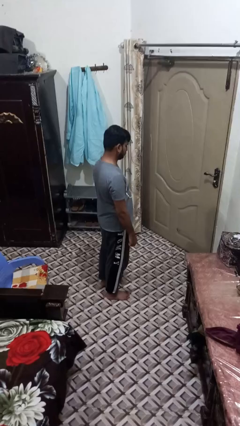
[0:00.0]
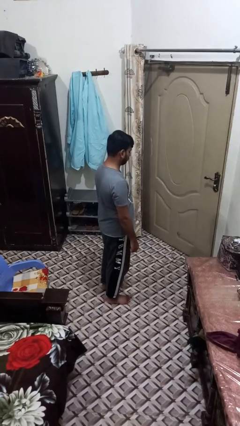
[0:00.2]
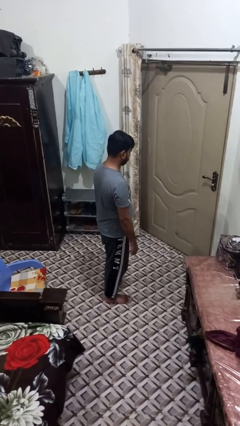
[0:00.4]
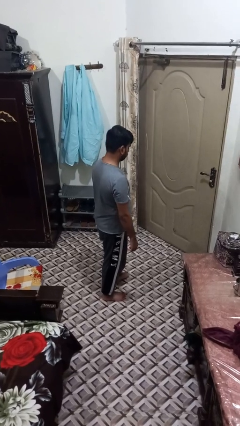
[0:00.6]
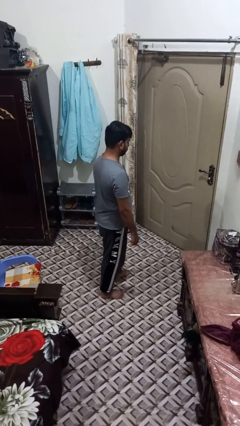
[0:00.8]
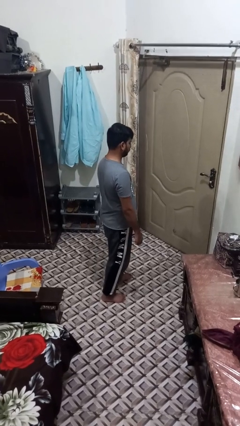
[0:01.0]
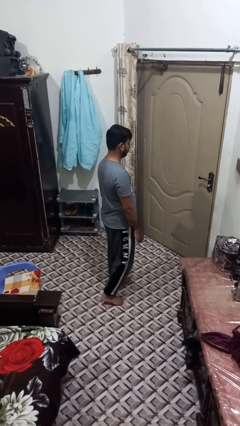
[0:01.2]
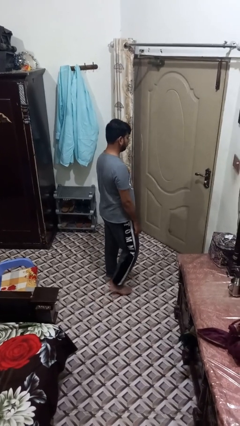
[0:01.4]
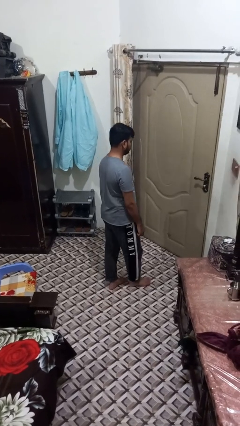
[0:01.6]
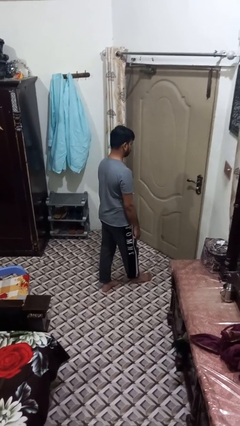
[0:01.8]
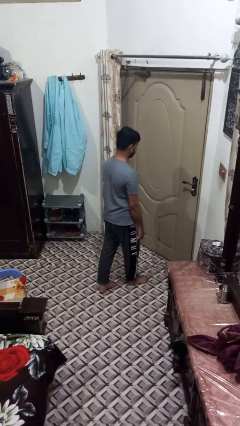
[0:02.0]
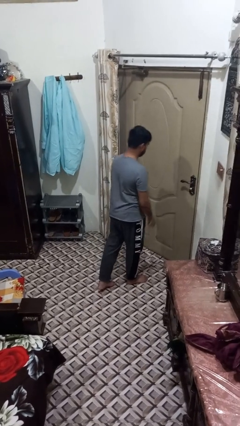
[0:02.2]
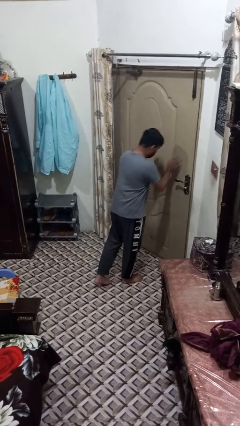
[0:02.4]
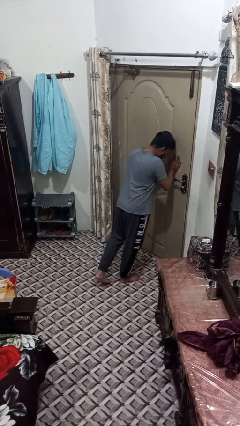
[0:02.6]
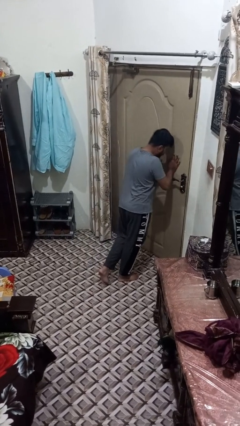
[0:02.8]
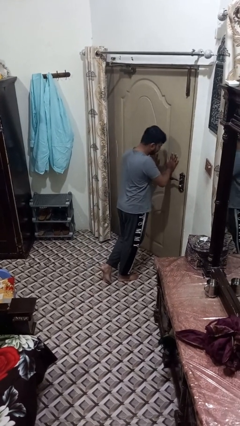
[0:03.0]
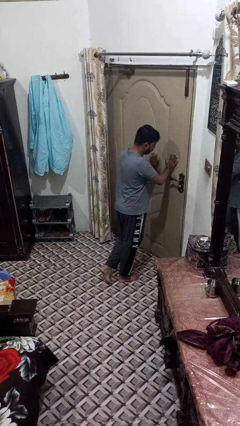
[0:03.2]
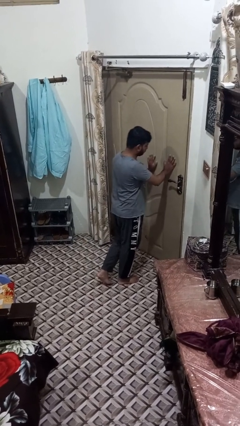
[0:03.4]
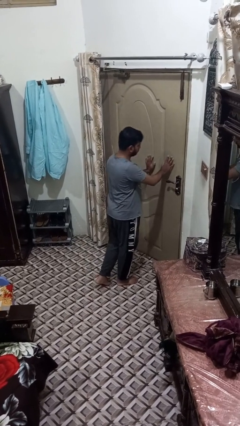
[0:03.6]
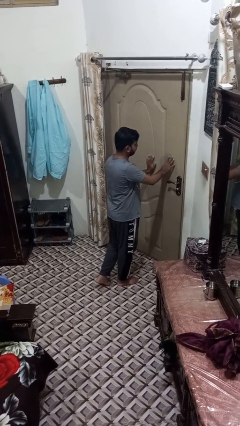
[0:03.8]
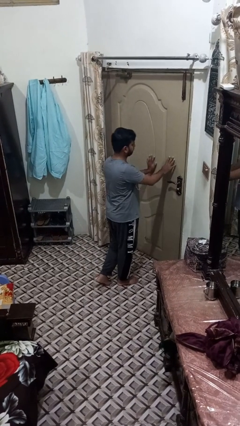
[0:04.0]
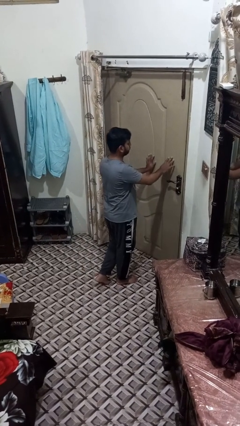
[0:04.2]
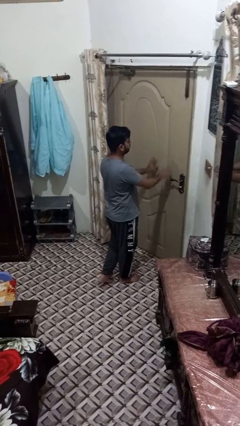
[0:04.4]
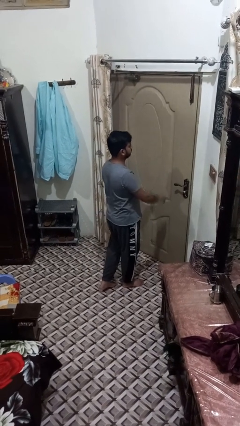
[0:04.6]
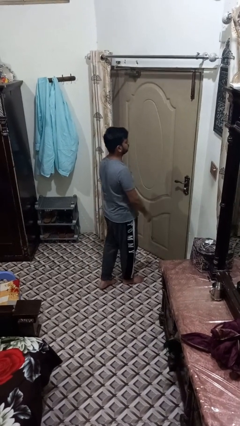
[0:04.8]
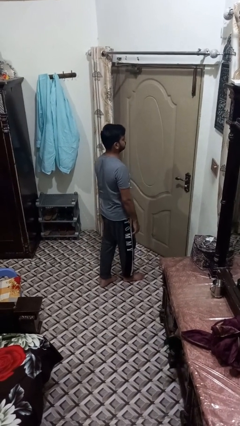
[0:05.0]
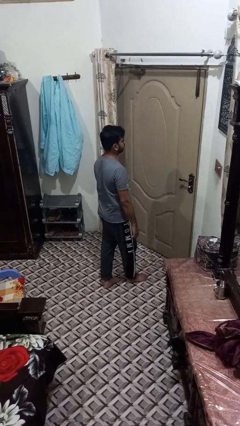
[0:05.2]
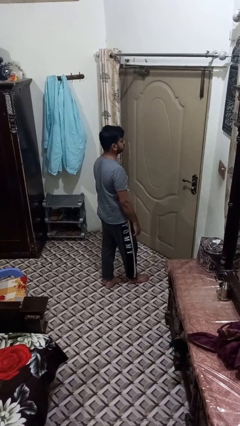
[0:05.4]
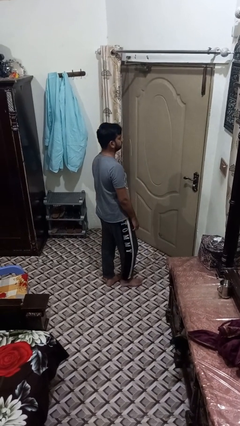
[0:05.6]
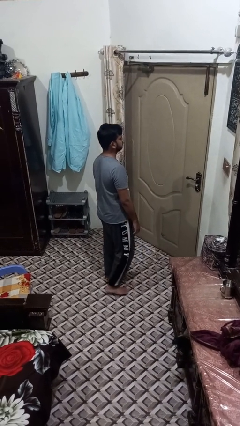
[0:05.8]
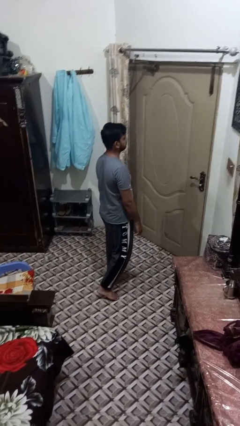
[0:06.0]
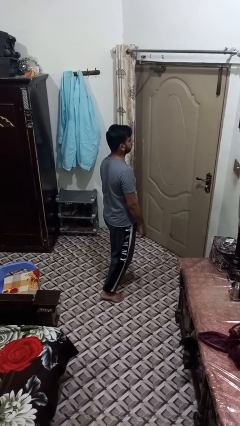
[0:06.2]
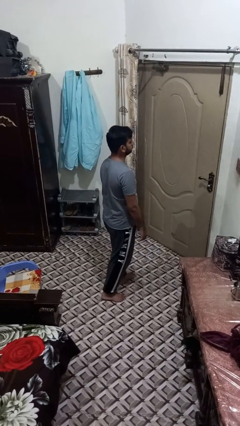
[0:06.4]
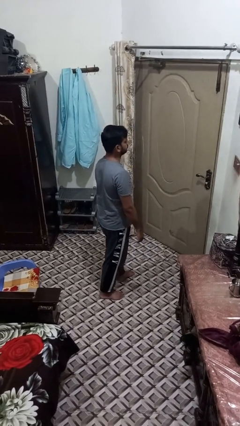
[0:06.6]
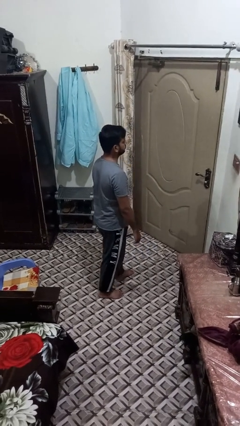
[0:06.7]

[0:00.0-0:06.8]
person bumps into wall

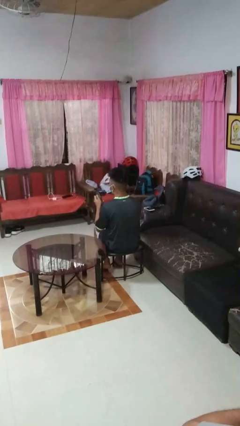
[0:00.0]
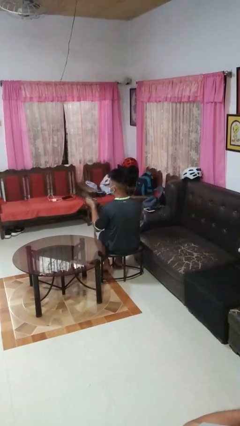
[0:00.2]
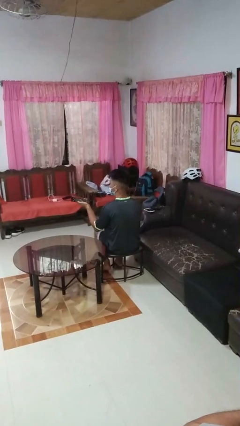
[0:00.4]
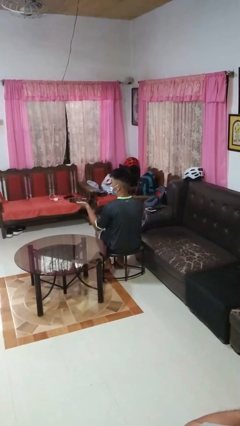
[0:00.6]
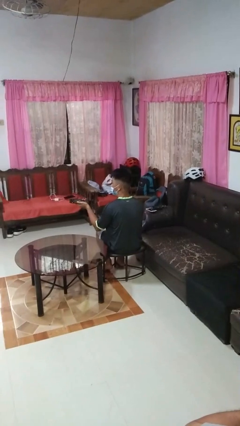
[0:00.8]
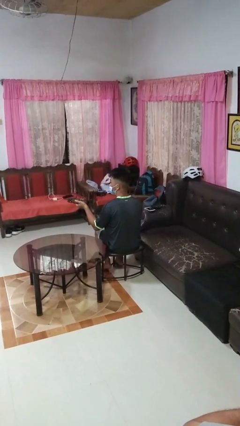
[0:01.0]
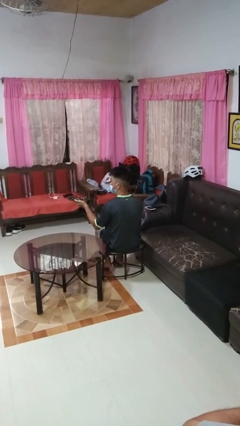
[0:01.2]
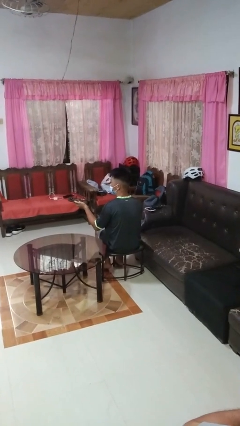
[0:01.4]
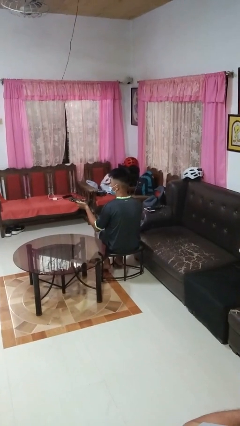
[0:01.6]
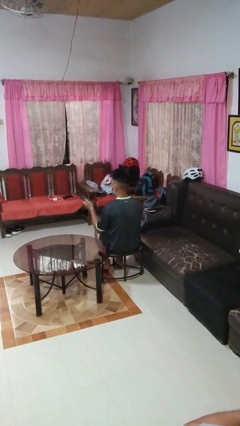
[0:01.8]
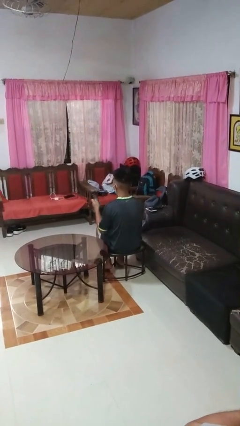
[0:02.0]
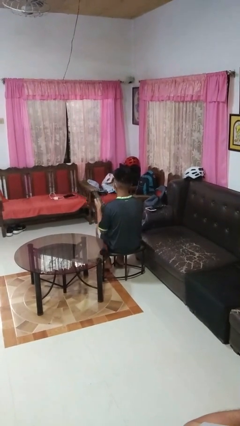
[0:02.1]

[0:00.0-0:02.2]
person uses television remote

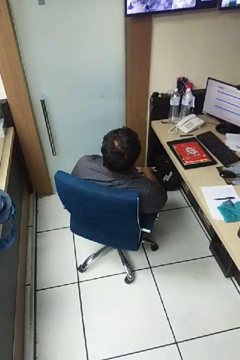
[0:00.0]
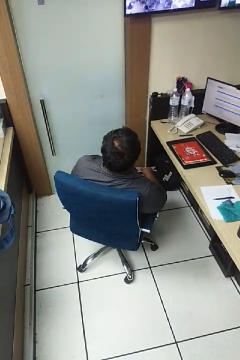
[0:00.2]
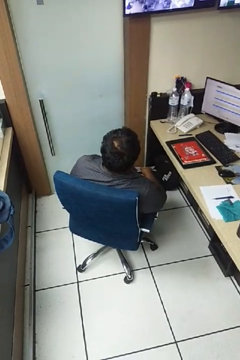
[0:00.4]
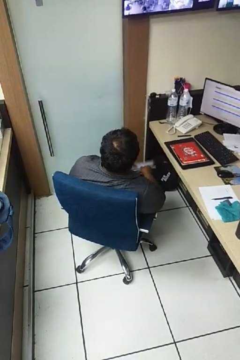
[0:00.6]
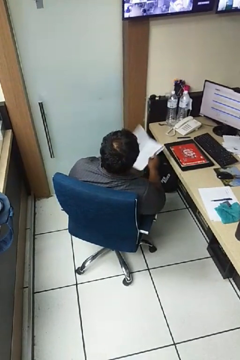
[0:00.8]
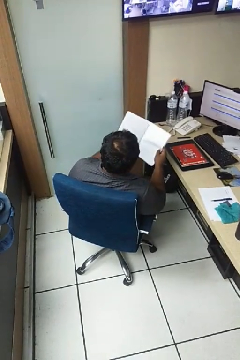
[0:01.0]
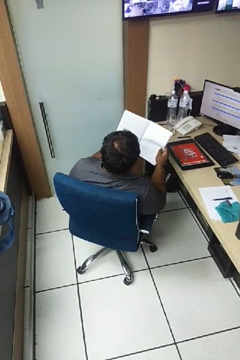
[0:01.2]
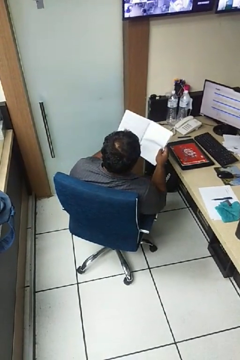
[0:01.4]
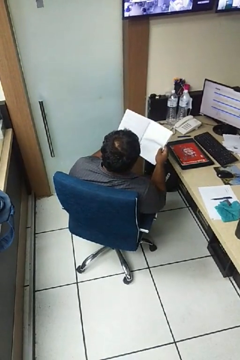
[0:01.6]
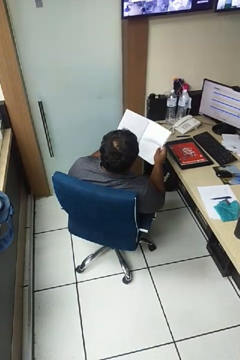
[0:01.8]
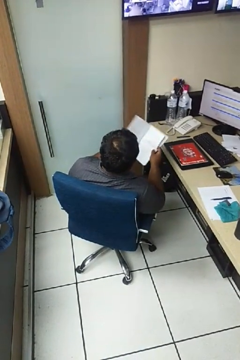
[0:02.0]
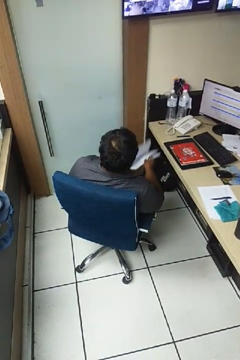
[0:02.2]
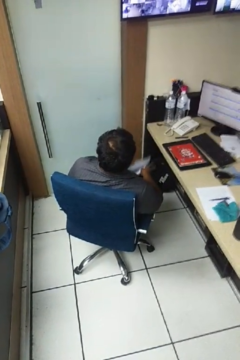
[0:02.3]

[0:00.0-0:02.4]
person reads book

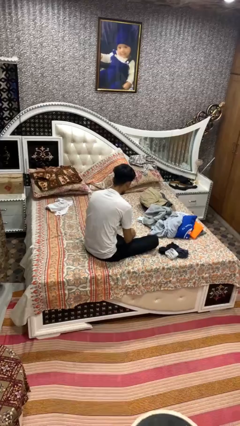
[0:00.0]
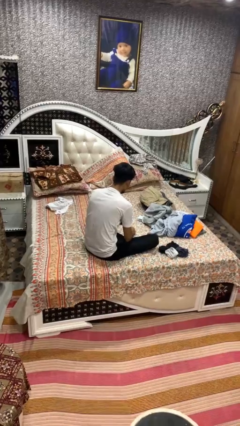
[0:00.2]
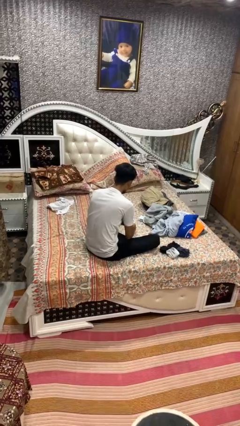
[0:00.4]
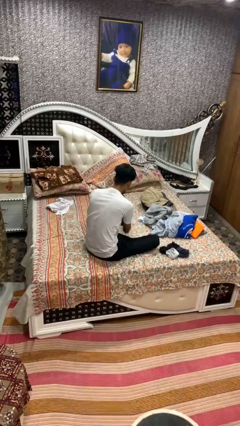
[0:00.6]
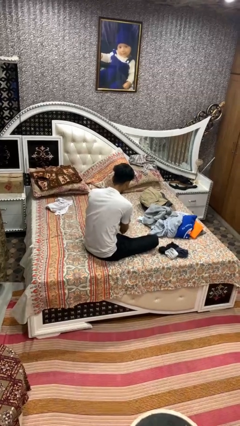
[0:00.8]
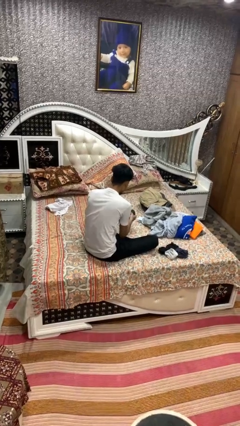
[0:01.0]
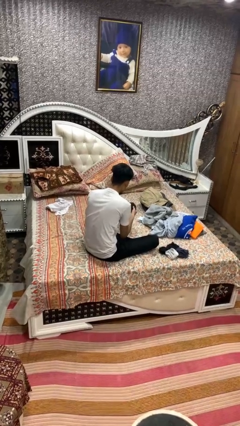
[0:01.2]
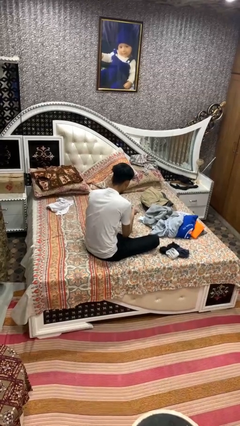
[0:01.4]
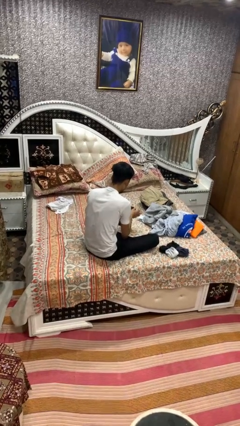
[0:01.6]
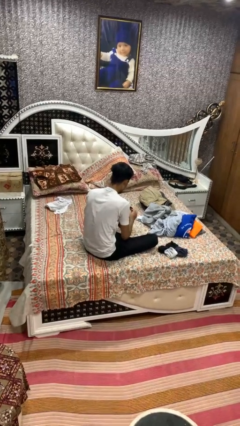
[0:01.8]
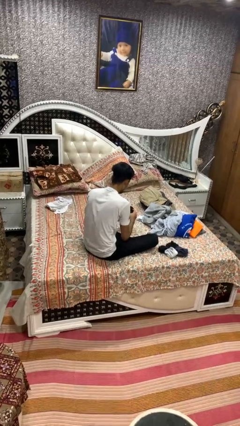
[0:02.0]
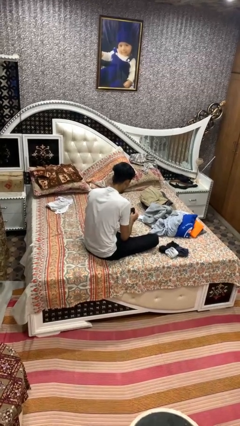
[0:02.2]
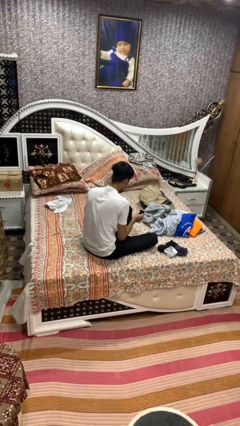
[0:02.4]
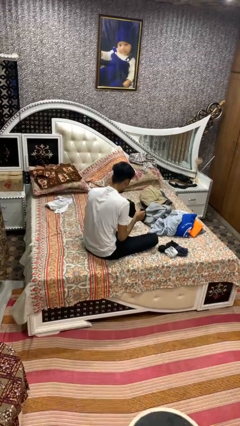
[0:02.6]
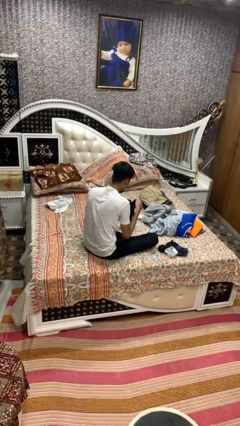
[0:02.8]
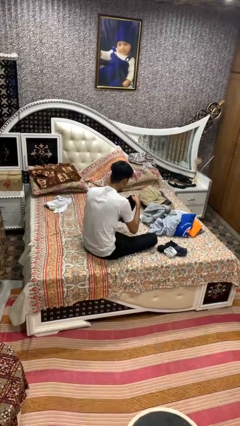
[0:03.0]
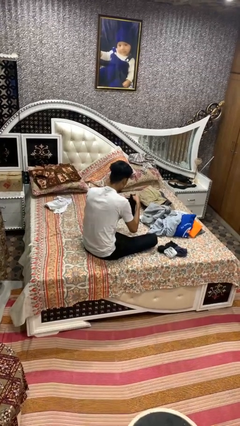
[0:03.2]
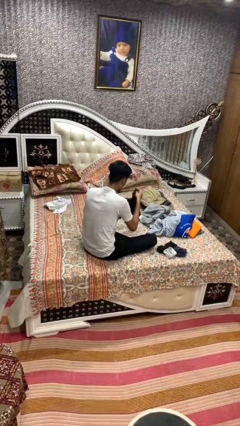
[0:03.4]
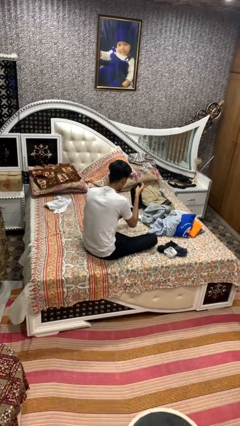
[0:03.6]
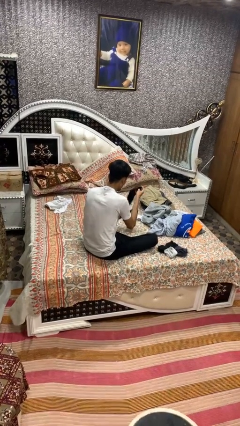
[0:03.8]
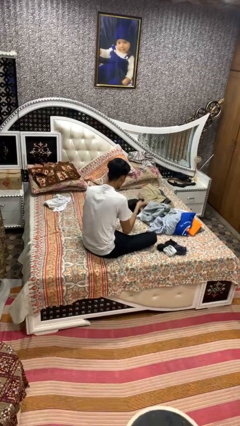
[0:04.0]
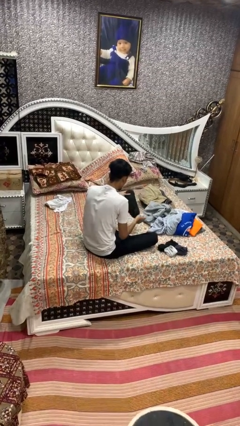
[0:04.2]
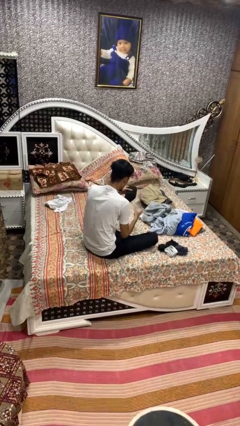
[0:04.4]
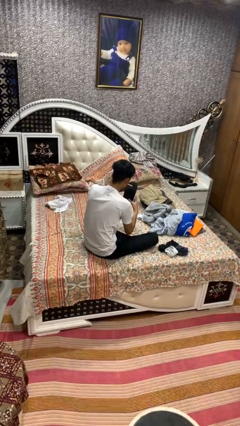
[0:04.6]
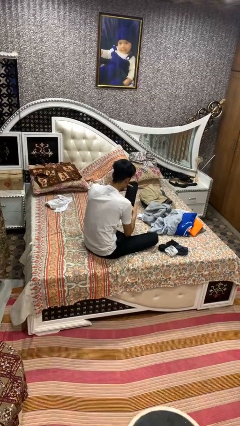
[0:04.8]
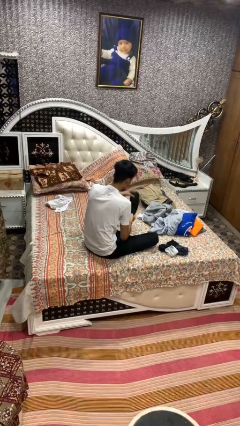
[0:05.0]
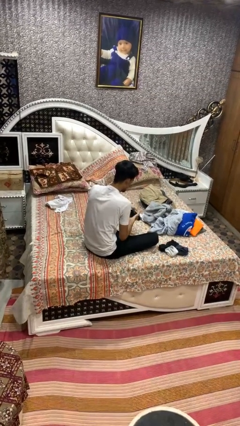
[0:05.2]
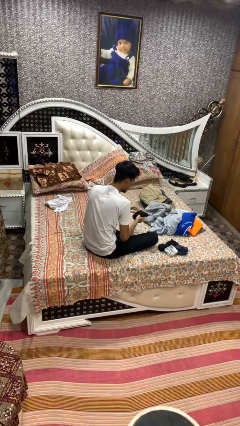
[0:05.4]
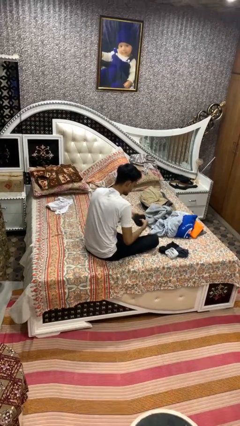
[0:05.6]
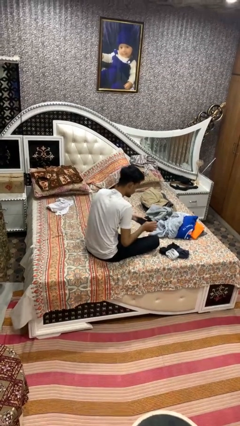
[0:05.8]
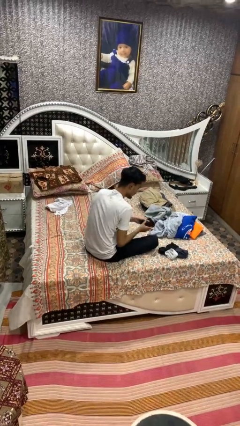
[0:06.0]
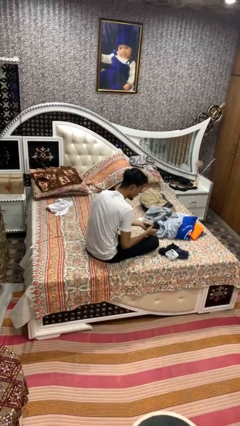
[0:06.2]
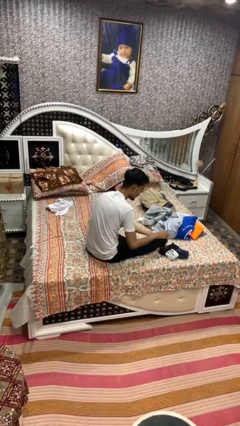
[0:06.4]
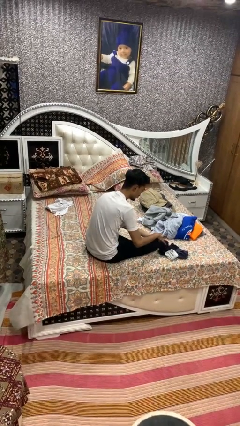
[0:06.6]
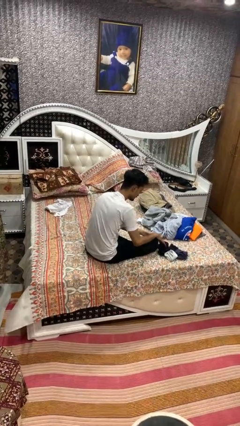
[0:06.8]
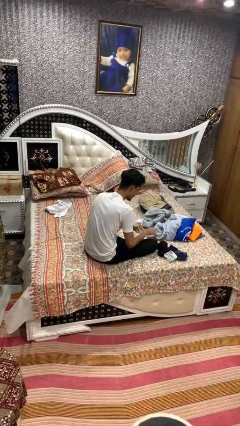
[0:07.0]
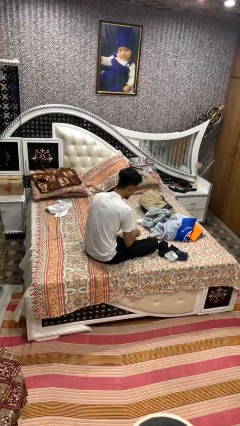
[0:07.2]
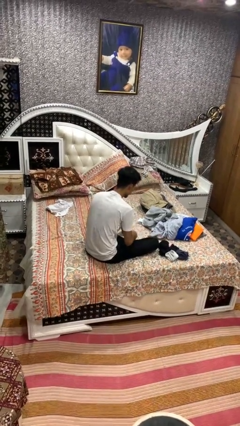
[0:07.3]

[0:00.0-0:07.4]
person folds socks
